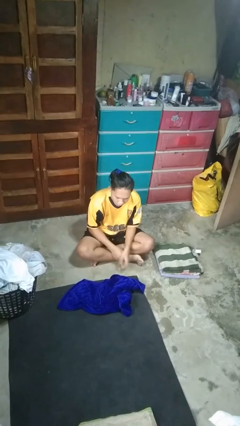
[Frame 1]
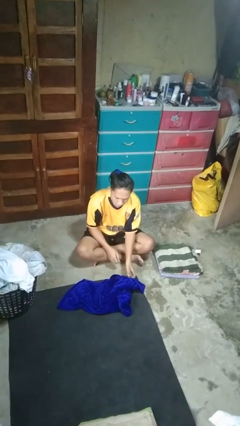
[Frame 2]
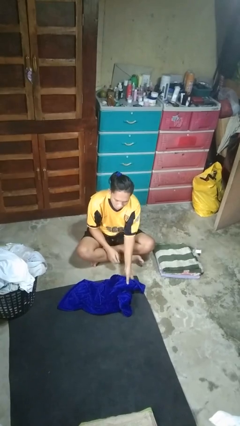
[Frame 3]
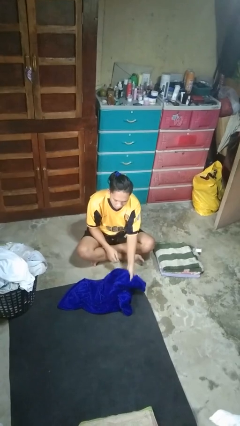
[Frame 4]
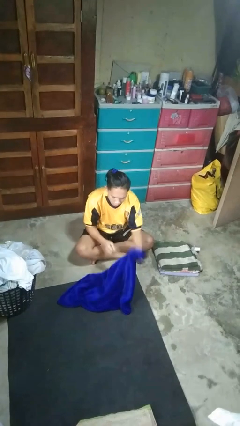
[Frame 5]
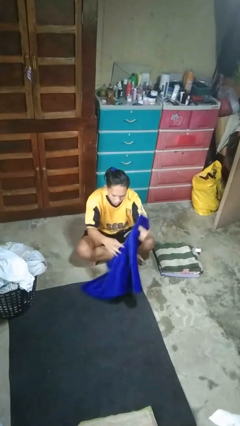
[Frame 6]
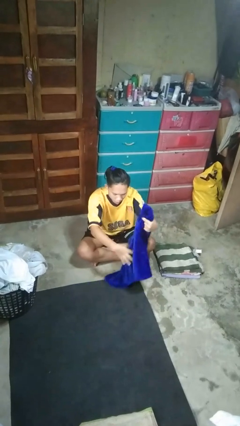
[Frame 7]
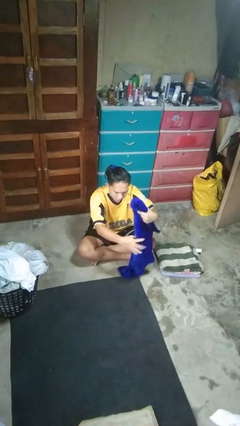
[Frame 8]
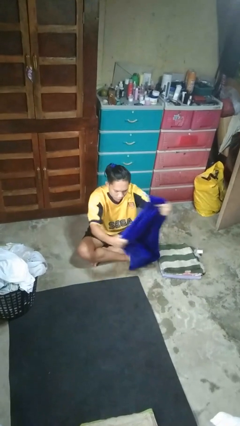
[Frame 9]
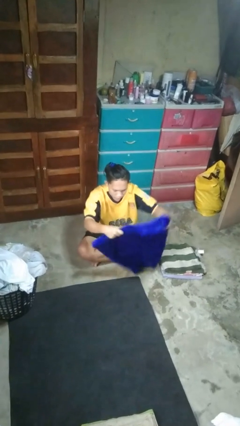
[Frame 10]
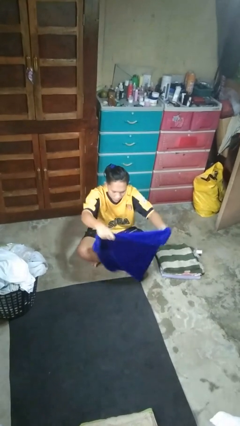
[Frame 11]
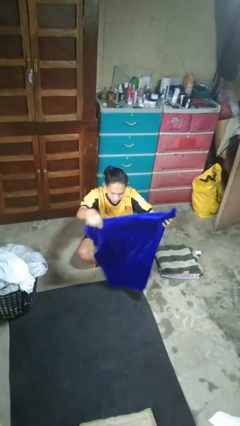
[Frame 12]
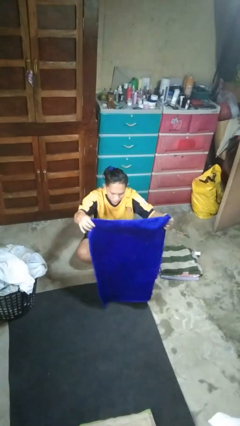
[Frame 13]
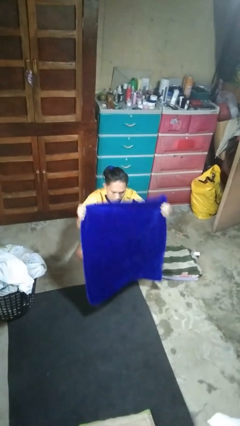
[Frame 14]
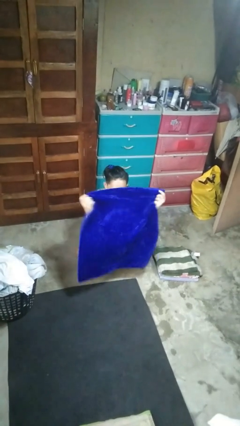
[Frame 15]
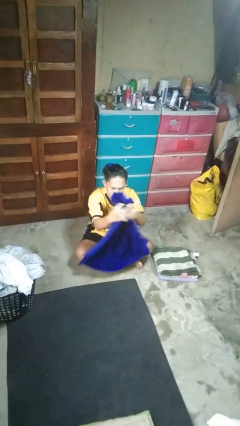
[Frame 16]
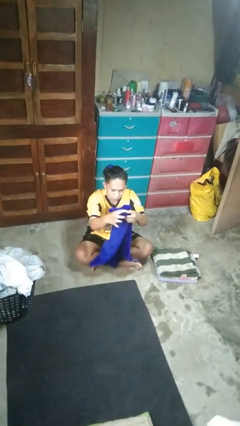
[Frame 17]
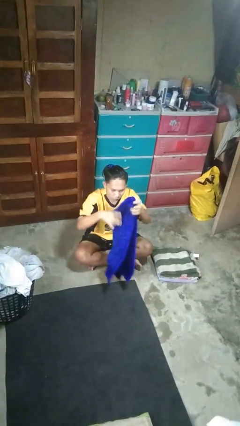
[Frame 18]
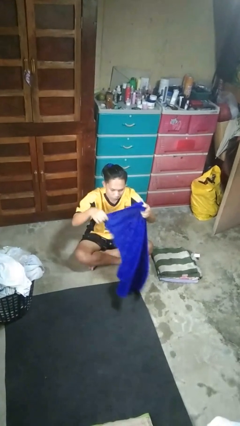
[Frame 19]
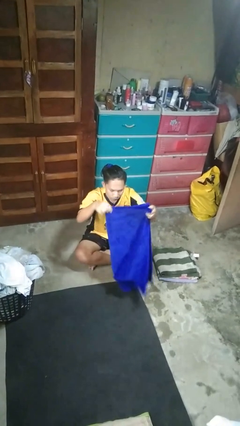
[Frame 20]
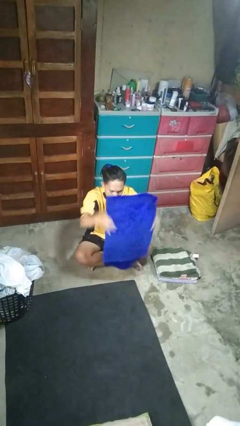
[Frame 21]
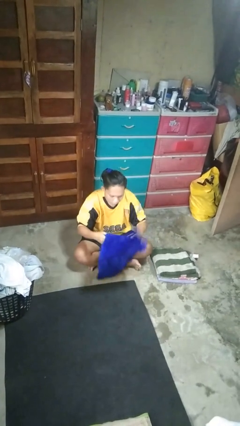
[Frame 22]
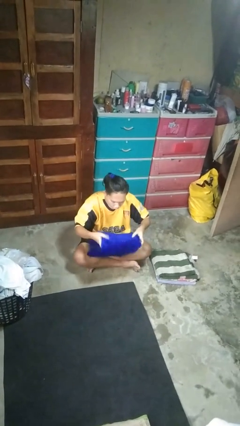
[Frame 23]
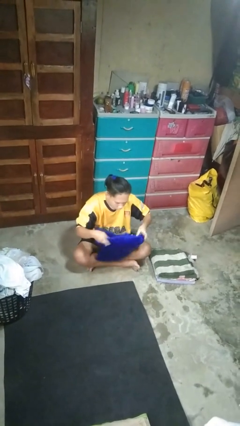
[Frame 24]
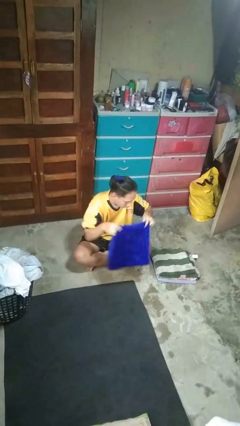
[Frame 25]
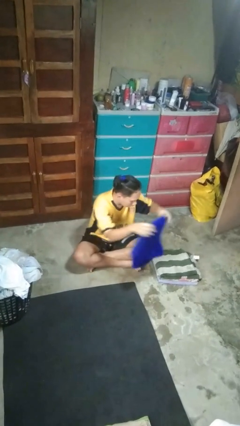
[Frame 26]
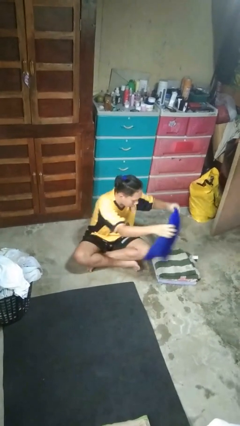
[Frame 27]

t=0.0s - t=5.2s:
person folds towel

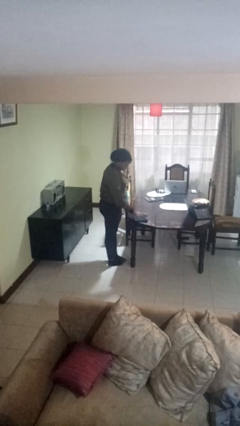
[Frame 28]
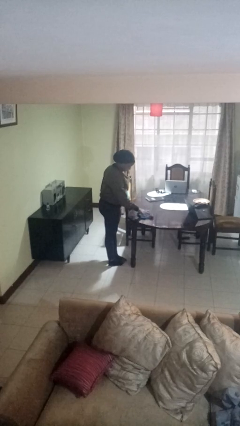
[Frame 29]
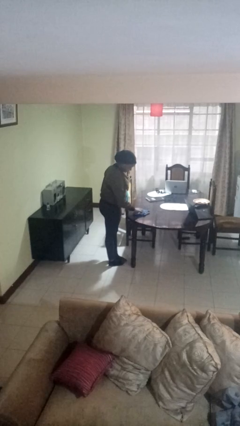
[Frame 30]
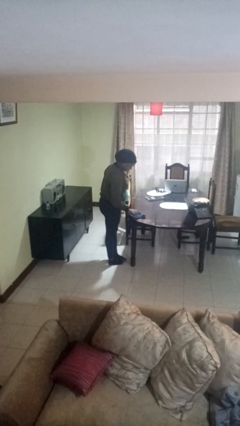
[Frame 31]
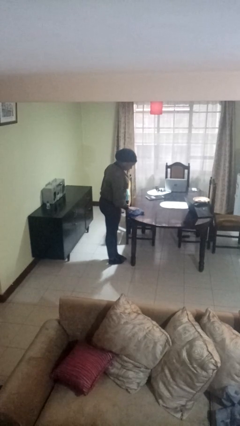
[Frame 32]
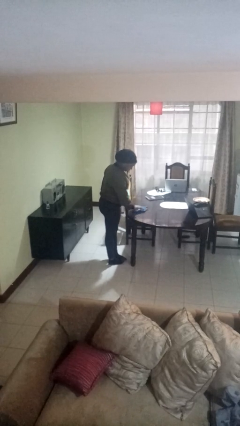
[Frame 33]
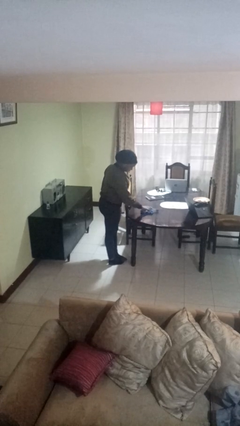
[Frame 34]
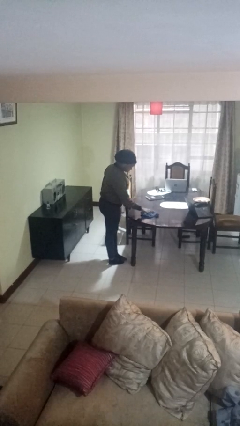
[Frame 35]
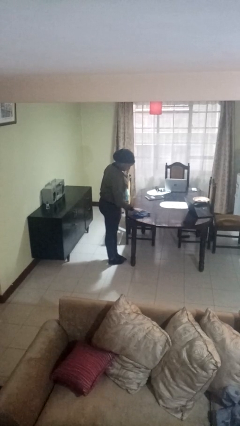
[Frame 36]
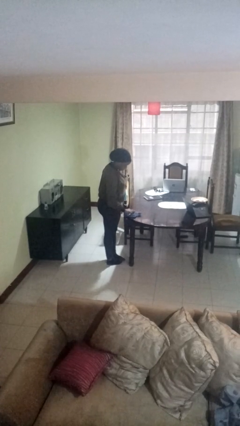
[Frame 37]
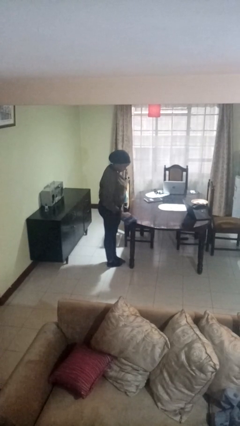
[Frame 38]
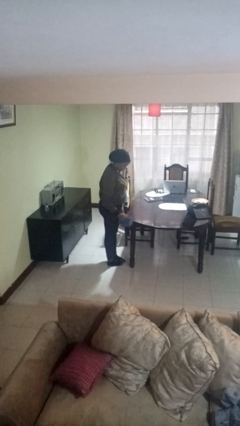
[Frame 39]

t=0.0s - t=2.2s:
person cleans table with rag

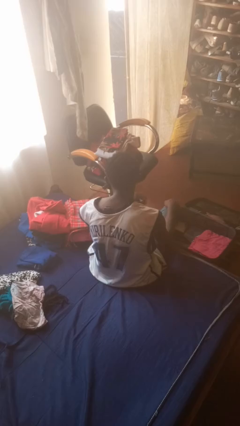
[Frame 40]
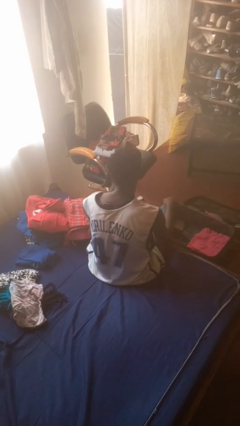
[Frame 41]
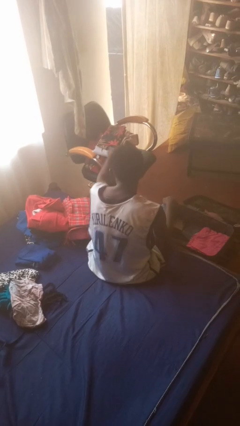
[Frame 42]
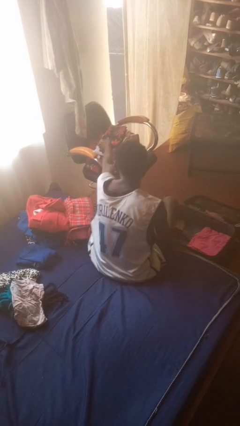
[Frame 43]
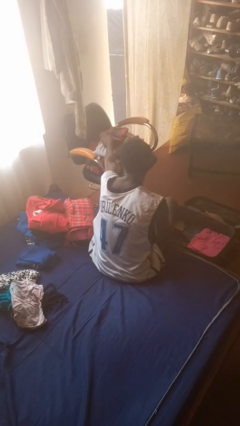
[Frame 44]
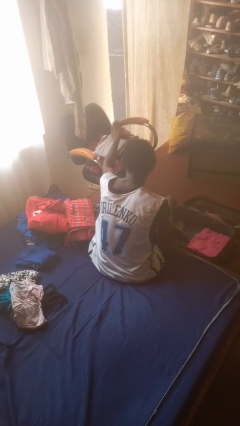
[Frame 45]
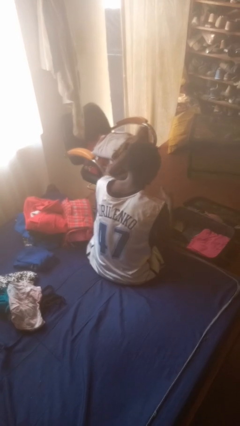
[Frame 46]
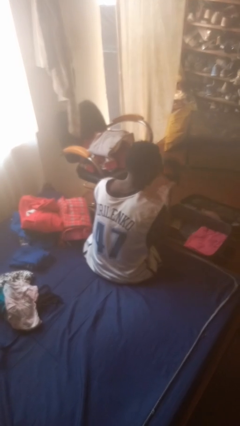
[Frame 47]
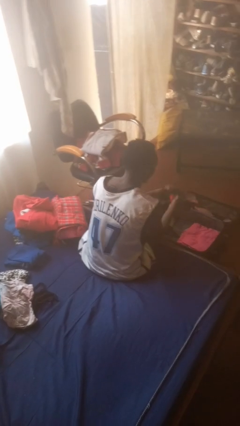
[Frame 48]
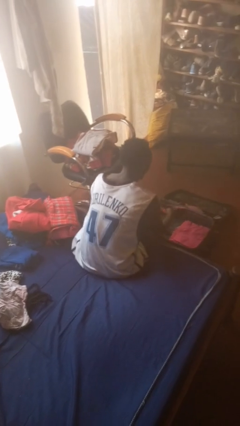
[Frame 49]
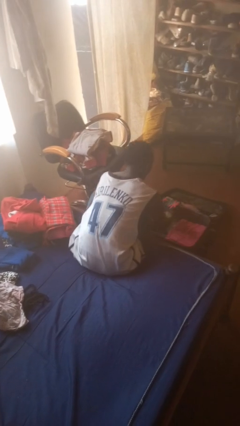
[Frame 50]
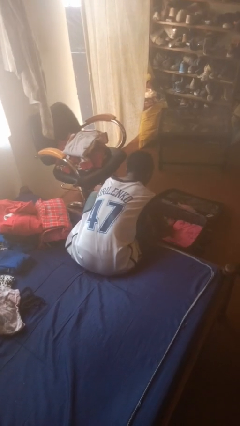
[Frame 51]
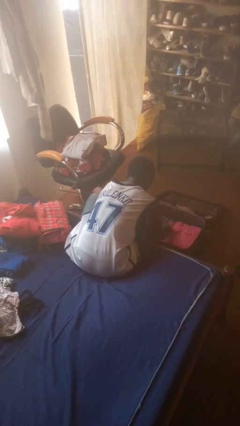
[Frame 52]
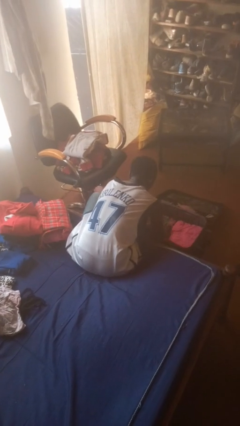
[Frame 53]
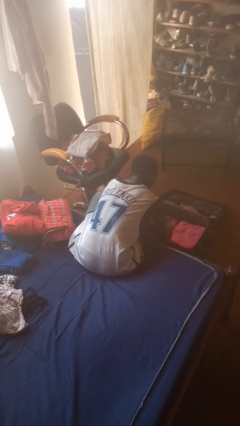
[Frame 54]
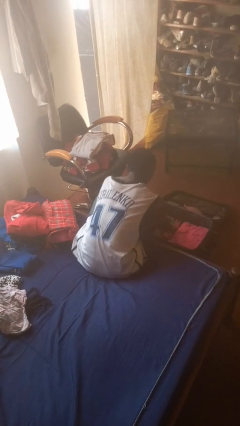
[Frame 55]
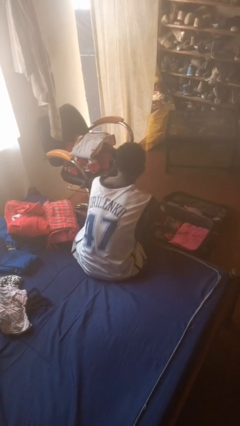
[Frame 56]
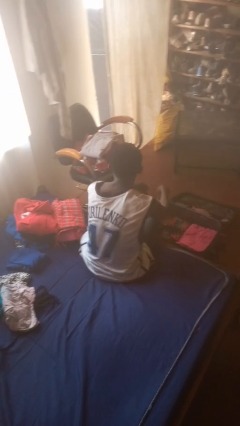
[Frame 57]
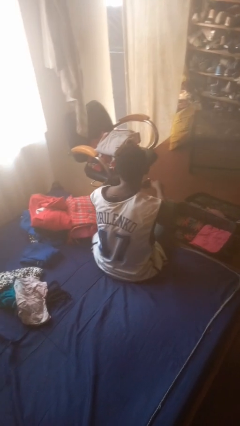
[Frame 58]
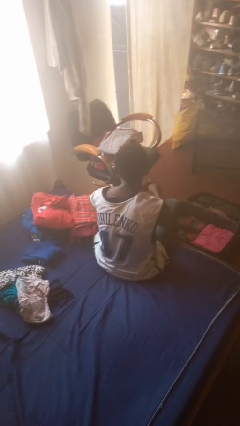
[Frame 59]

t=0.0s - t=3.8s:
person loads clothes into suitcase

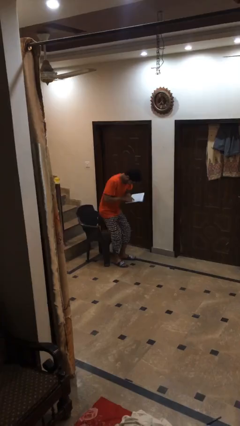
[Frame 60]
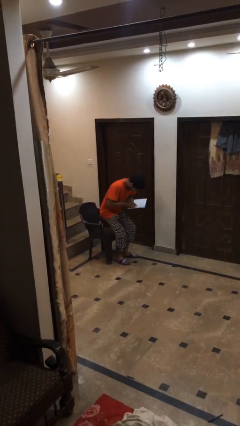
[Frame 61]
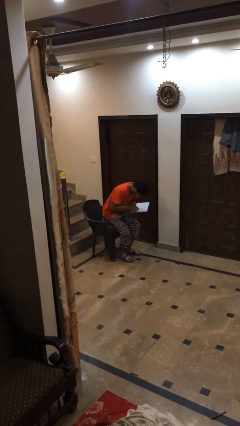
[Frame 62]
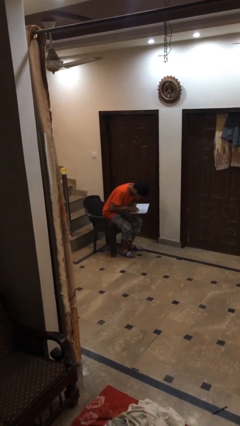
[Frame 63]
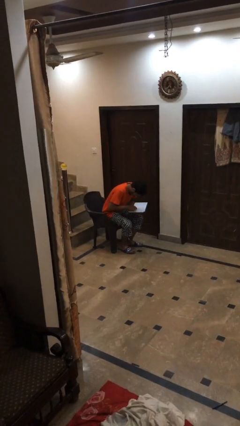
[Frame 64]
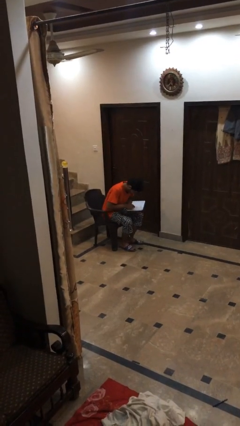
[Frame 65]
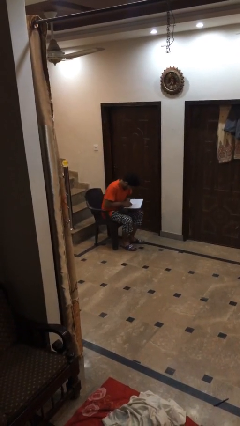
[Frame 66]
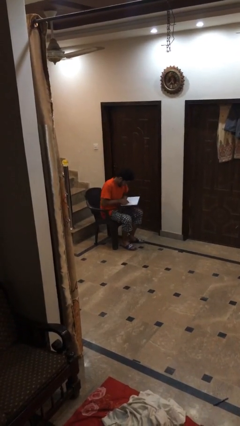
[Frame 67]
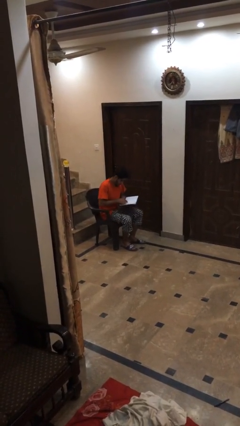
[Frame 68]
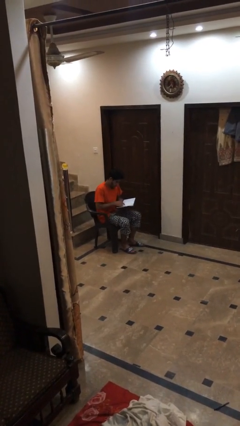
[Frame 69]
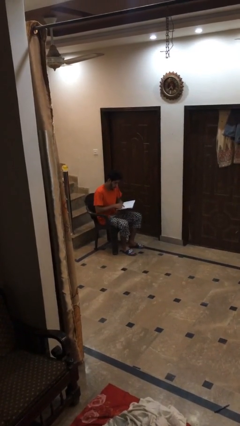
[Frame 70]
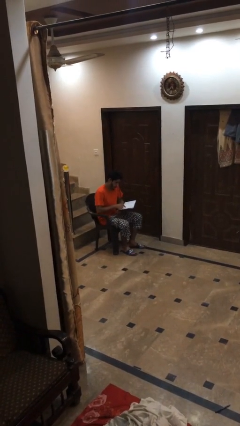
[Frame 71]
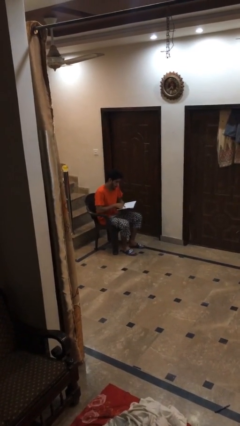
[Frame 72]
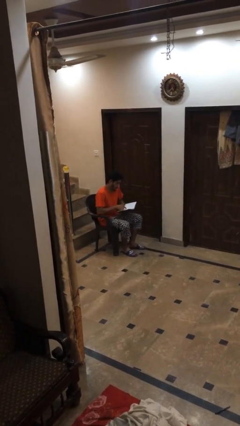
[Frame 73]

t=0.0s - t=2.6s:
person sits down

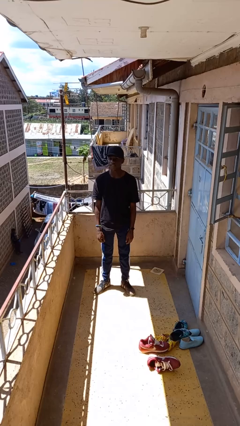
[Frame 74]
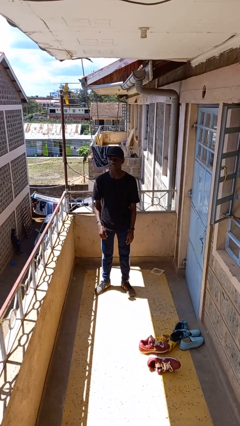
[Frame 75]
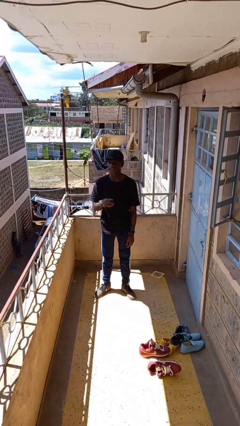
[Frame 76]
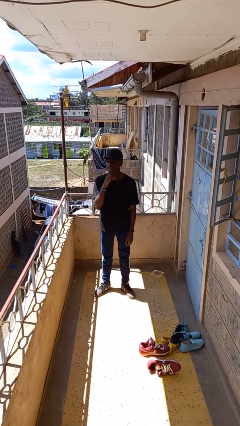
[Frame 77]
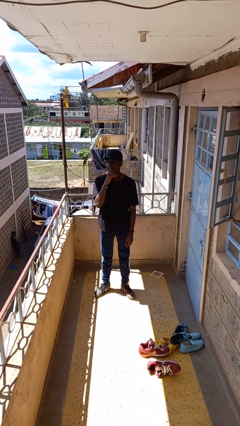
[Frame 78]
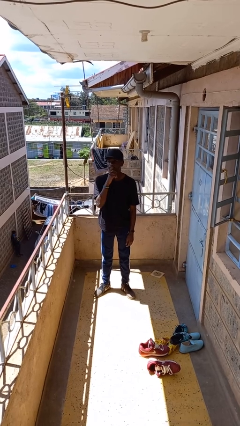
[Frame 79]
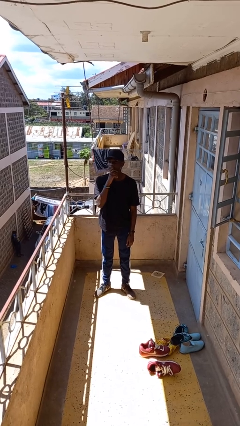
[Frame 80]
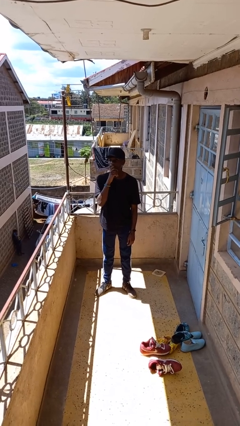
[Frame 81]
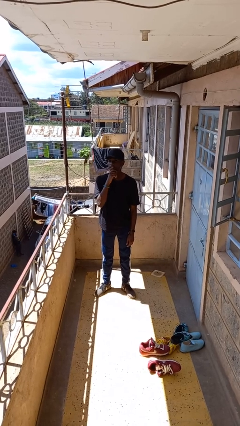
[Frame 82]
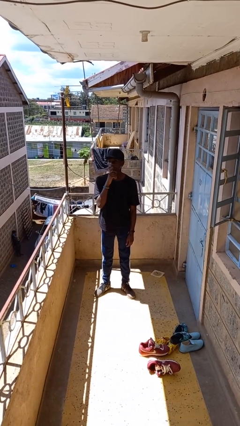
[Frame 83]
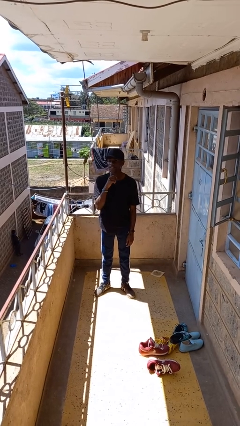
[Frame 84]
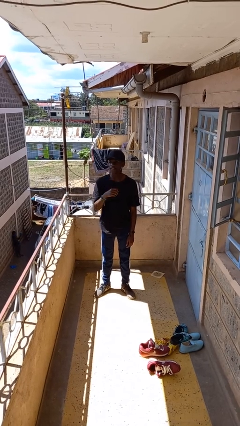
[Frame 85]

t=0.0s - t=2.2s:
person strokes chin

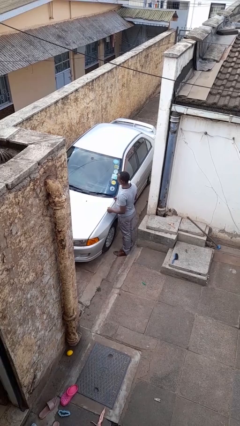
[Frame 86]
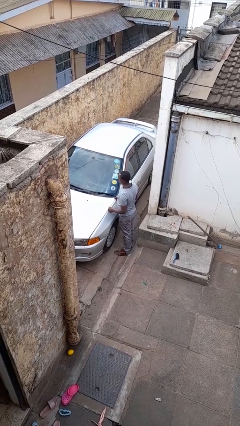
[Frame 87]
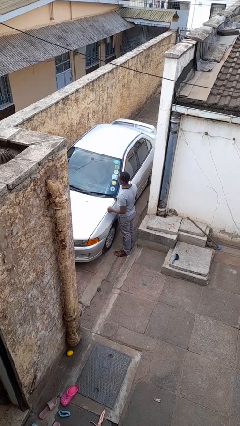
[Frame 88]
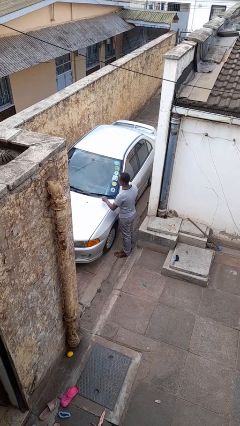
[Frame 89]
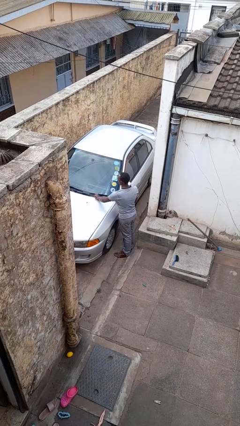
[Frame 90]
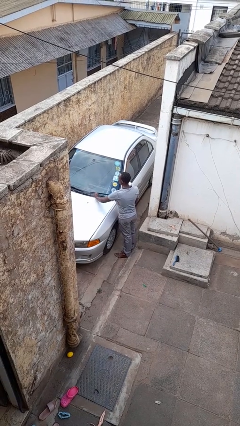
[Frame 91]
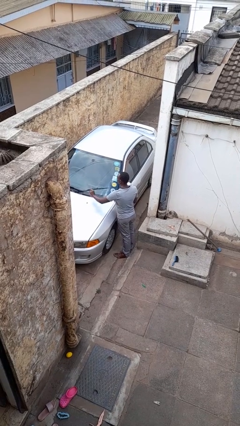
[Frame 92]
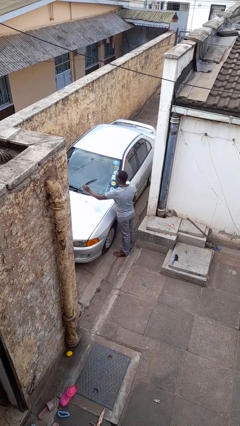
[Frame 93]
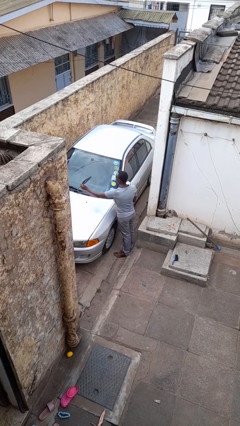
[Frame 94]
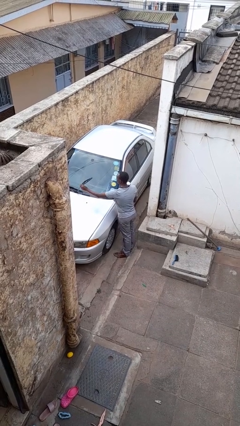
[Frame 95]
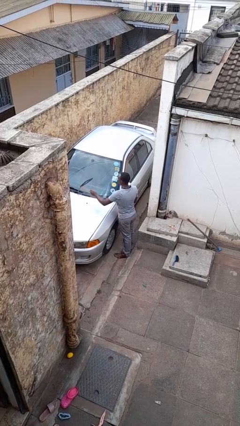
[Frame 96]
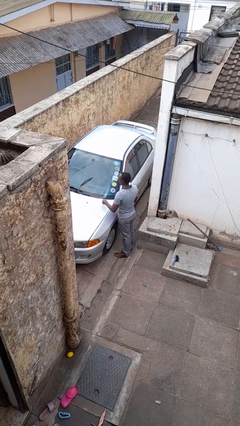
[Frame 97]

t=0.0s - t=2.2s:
person flips up car wipers
